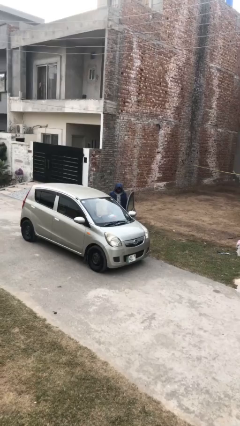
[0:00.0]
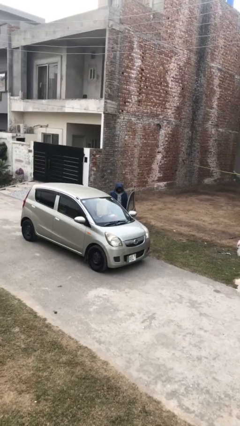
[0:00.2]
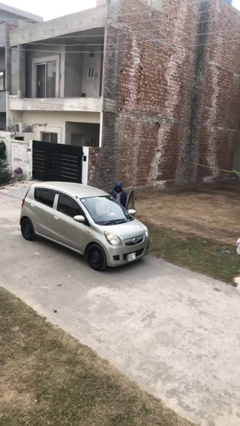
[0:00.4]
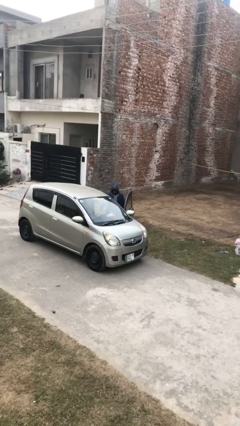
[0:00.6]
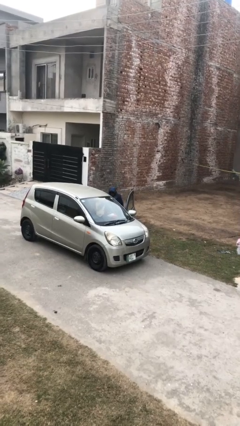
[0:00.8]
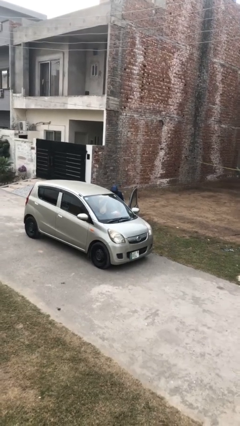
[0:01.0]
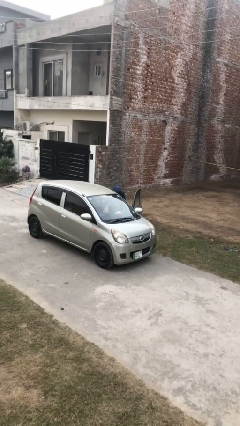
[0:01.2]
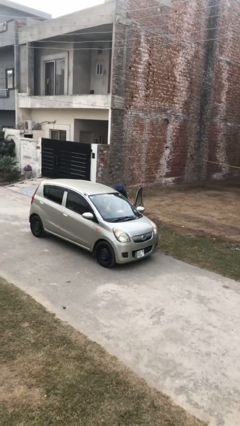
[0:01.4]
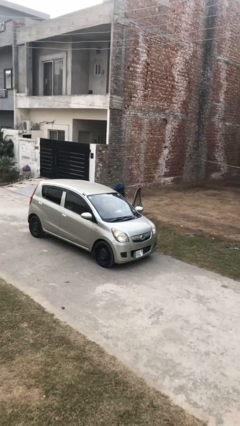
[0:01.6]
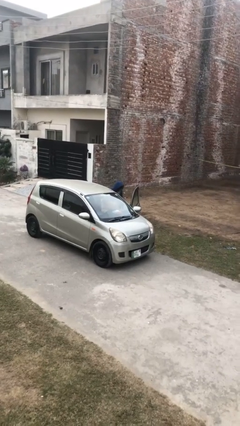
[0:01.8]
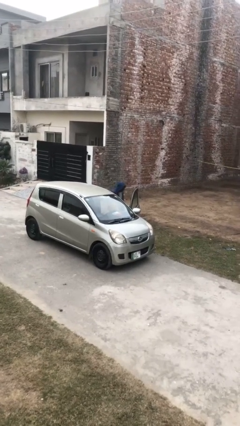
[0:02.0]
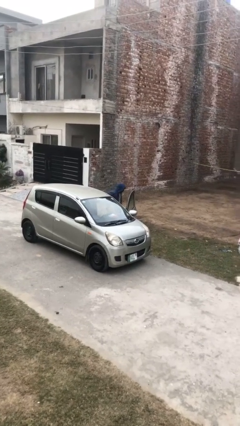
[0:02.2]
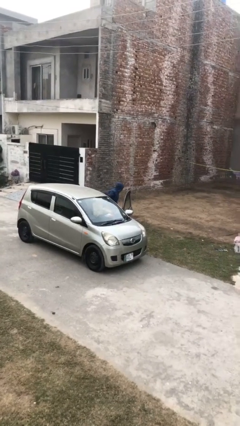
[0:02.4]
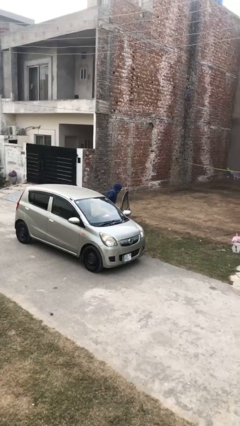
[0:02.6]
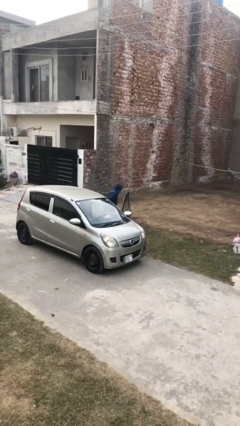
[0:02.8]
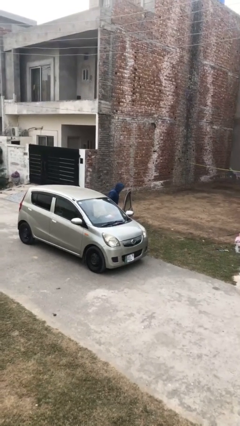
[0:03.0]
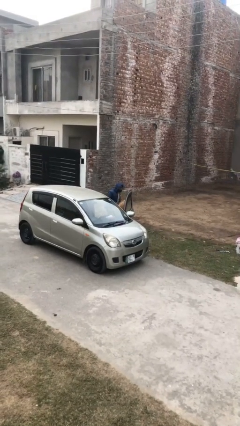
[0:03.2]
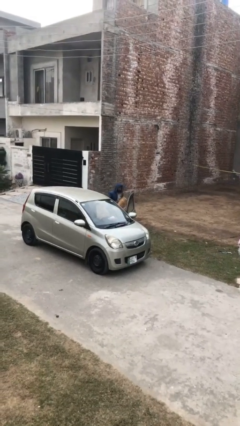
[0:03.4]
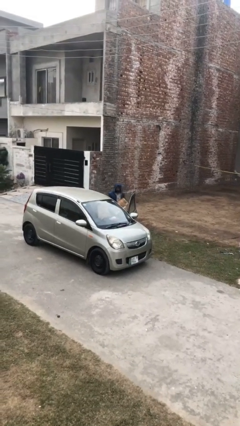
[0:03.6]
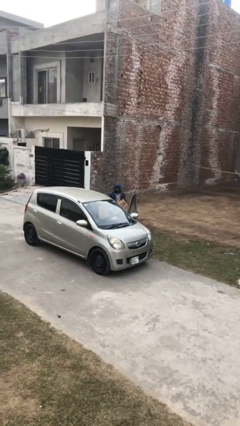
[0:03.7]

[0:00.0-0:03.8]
person unloads car

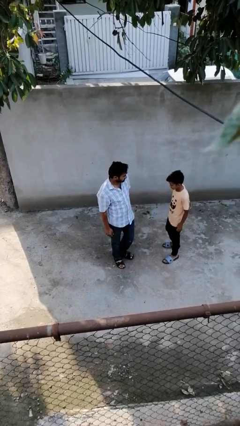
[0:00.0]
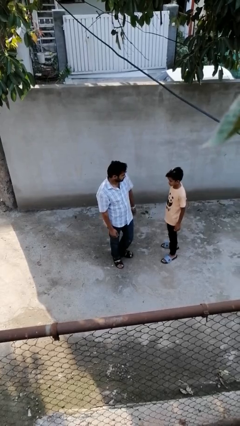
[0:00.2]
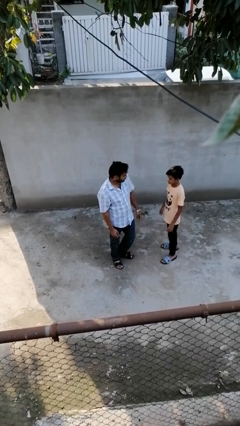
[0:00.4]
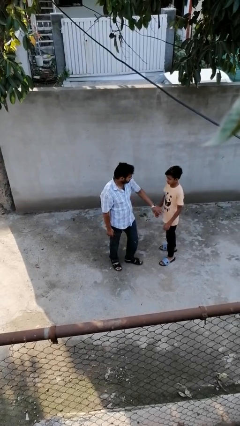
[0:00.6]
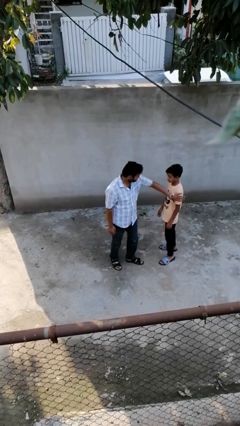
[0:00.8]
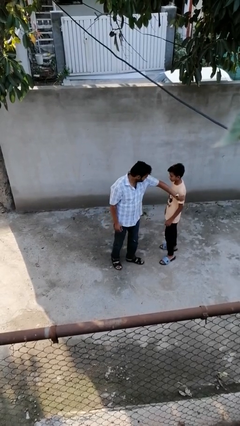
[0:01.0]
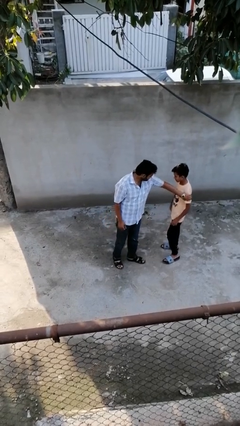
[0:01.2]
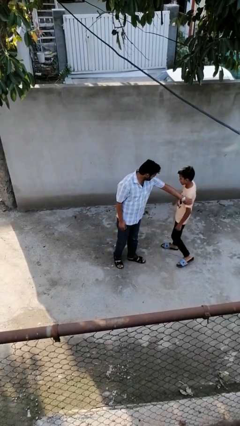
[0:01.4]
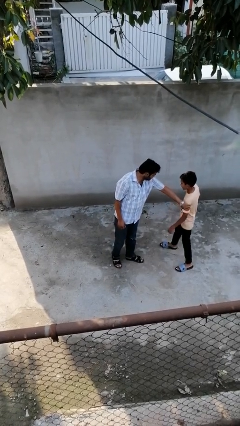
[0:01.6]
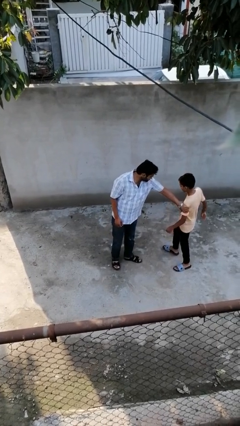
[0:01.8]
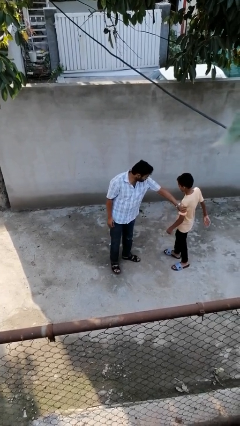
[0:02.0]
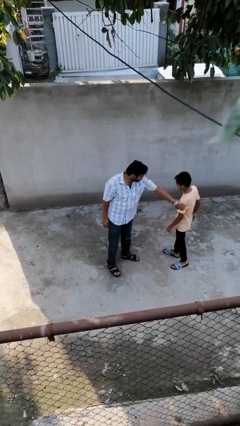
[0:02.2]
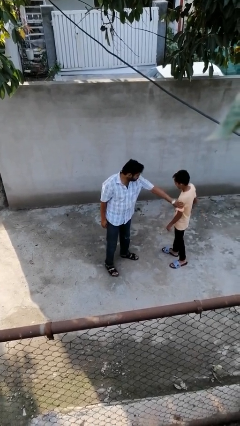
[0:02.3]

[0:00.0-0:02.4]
person grabs person by bicep

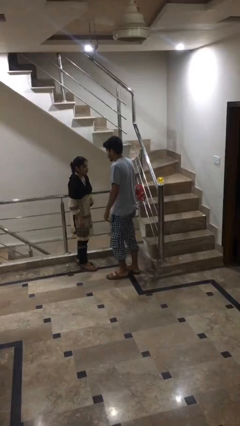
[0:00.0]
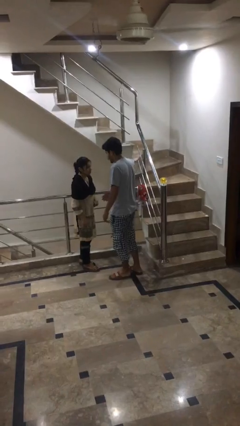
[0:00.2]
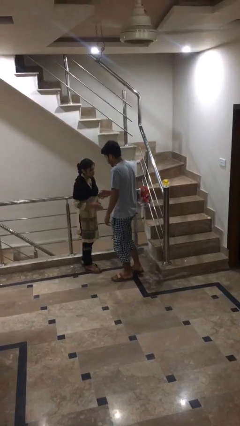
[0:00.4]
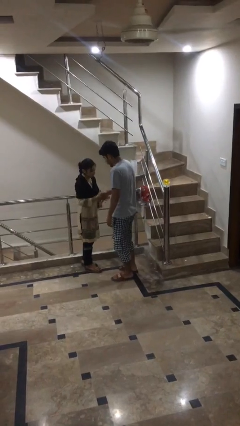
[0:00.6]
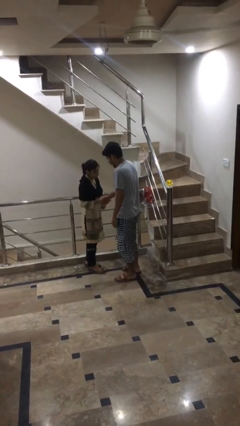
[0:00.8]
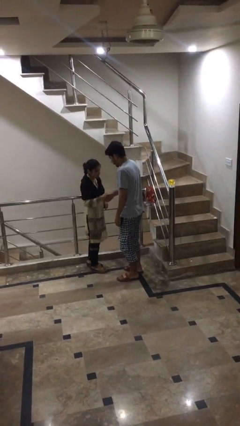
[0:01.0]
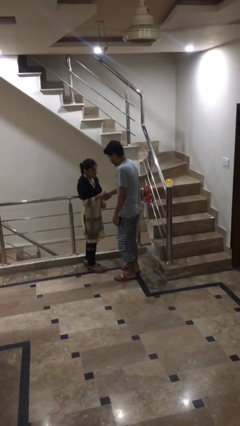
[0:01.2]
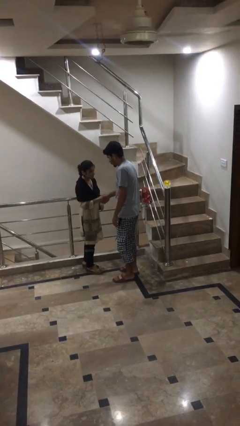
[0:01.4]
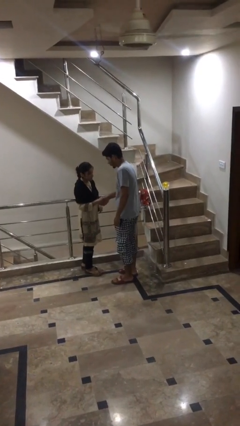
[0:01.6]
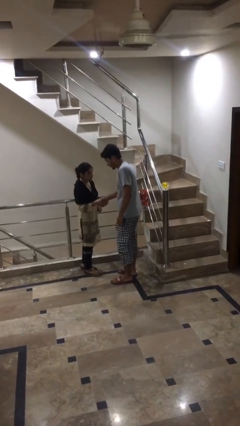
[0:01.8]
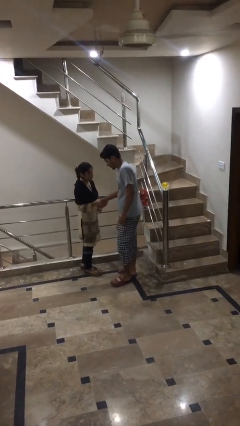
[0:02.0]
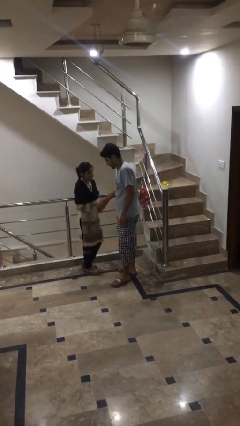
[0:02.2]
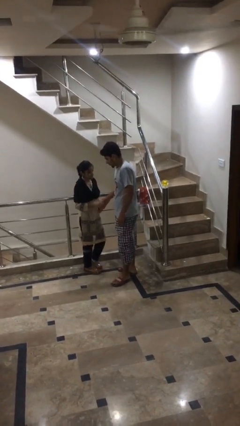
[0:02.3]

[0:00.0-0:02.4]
person shakes hand

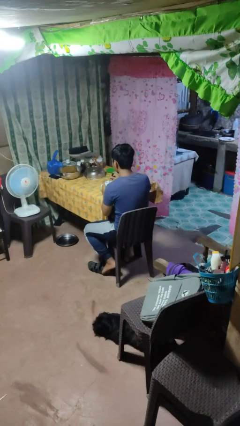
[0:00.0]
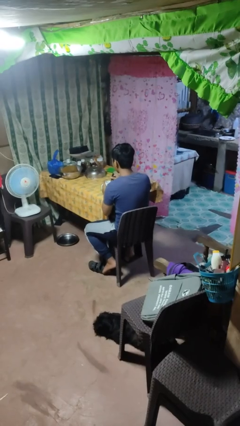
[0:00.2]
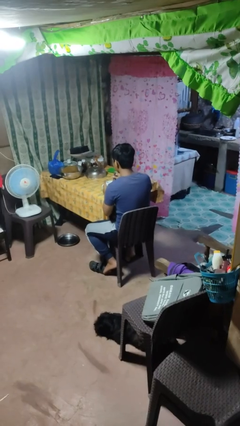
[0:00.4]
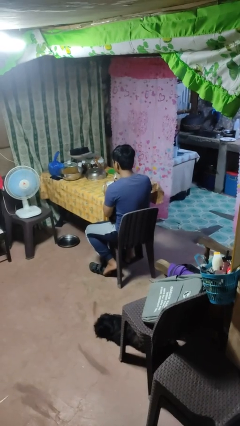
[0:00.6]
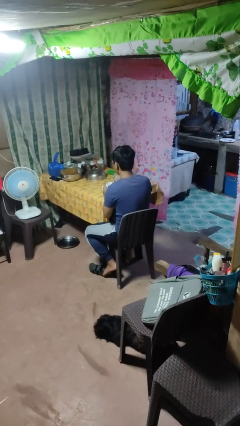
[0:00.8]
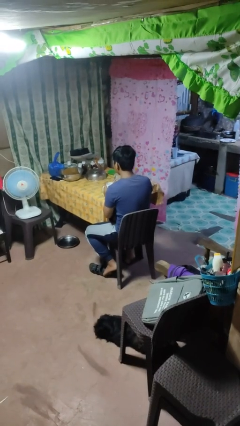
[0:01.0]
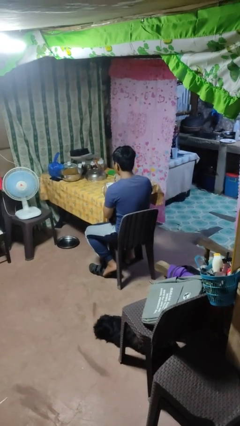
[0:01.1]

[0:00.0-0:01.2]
person stirs mug

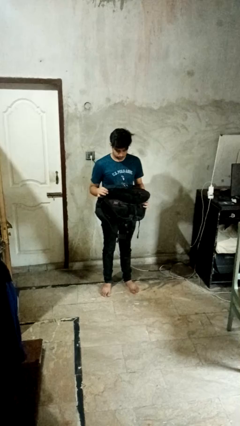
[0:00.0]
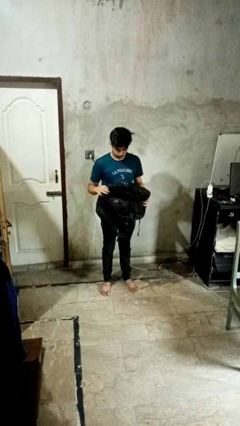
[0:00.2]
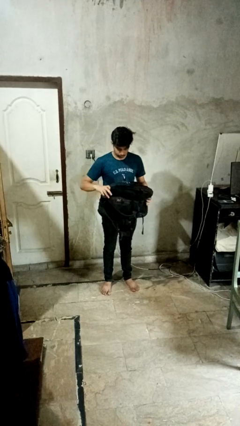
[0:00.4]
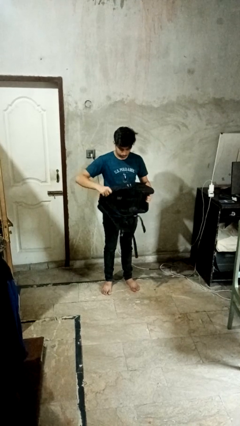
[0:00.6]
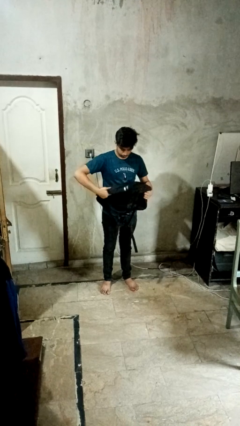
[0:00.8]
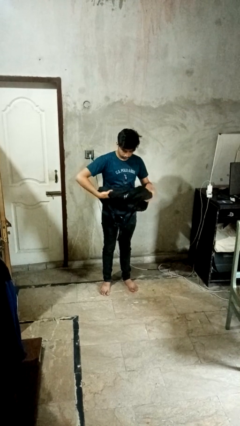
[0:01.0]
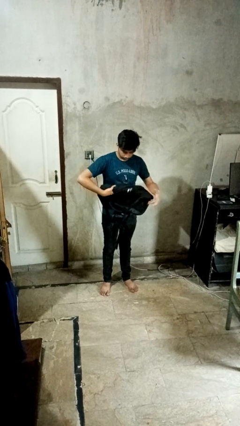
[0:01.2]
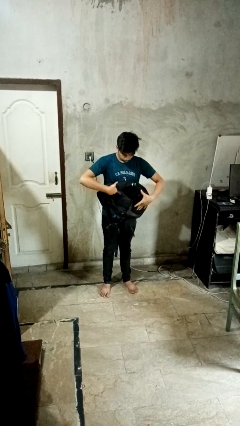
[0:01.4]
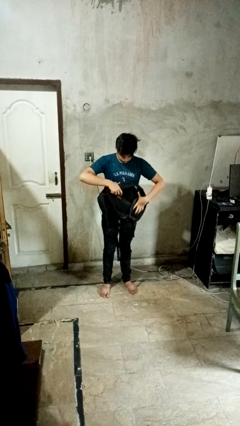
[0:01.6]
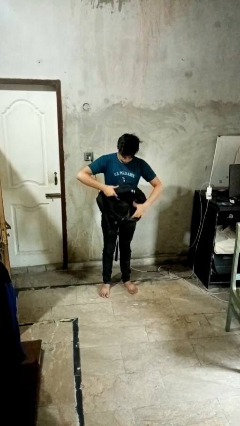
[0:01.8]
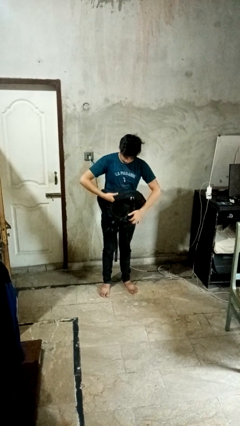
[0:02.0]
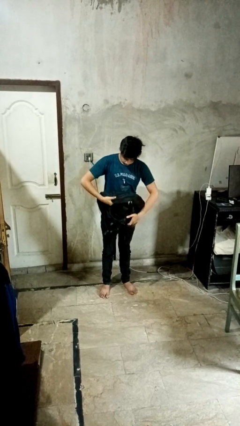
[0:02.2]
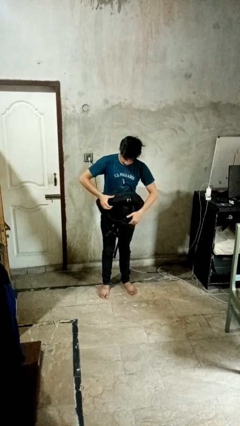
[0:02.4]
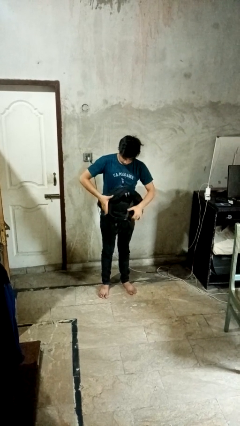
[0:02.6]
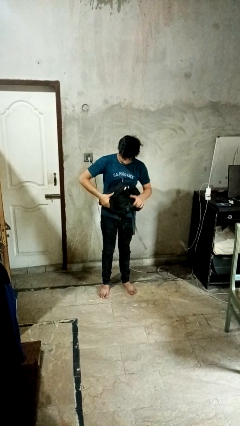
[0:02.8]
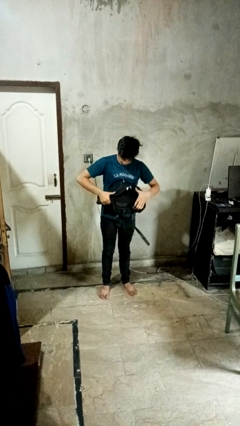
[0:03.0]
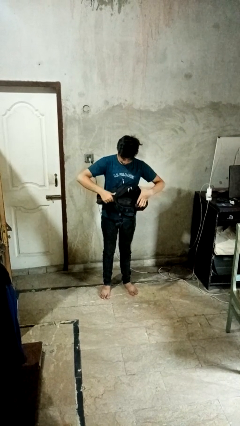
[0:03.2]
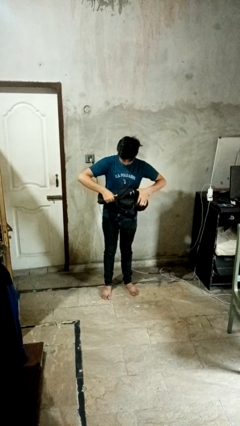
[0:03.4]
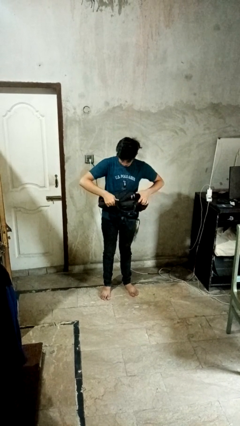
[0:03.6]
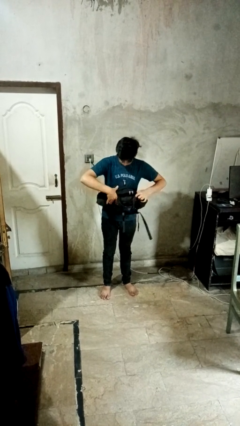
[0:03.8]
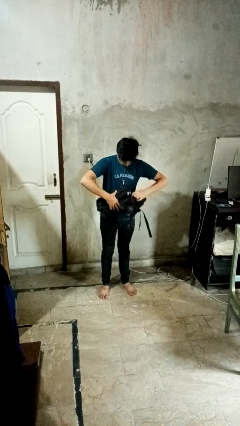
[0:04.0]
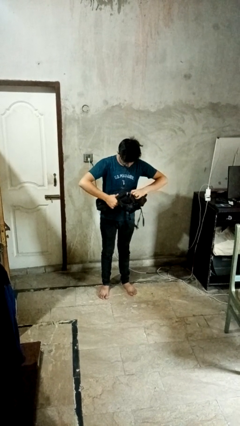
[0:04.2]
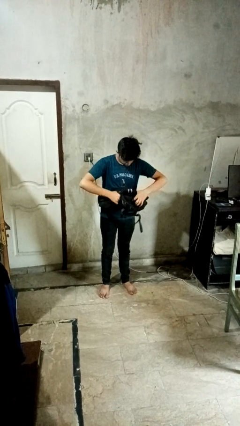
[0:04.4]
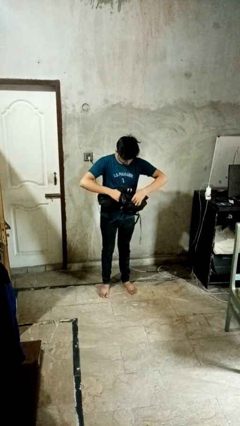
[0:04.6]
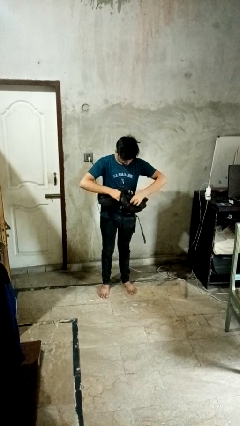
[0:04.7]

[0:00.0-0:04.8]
person squeezes object

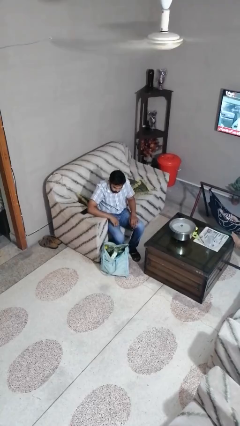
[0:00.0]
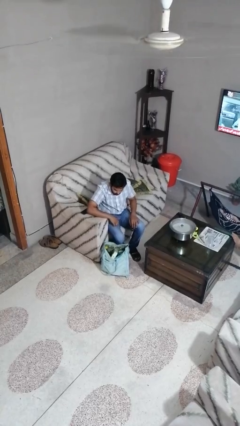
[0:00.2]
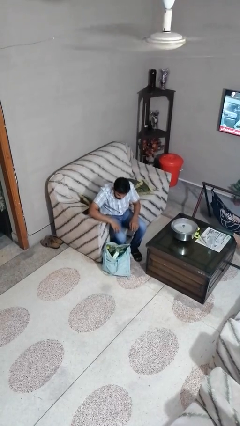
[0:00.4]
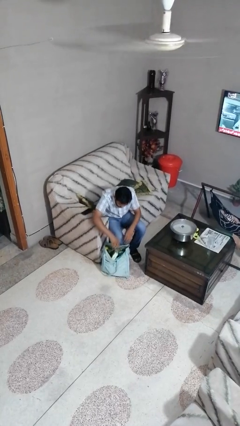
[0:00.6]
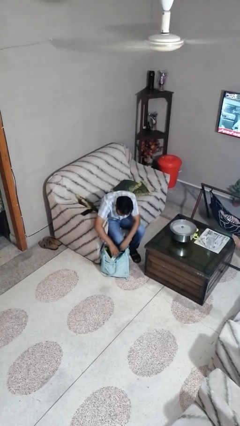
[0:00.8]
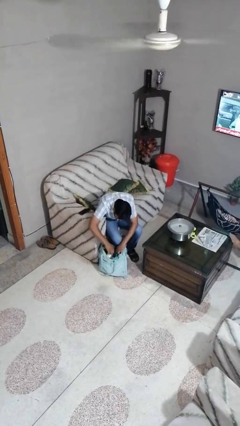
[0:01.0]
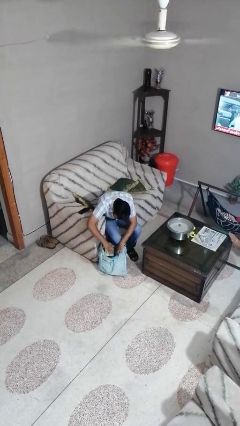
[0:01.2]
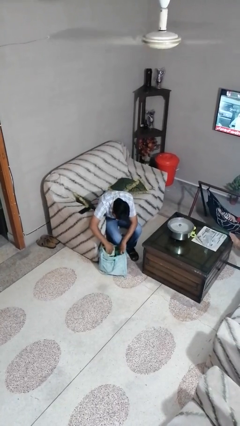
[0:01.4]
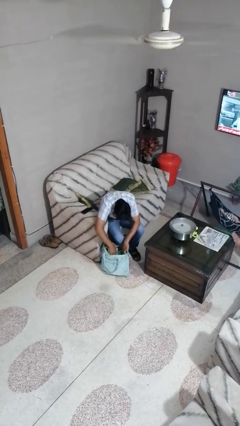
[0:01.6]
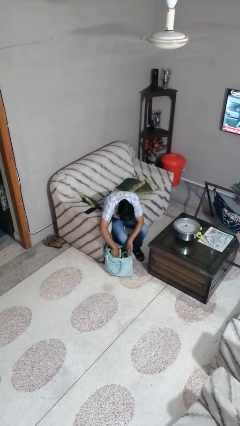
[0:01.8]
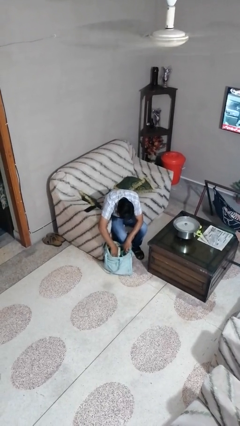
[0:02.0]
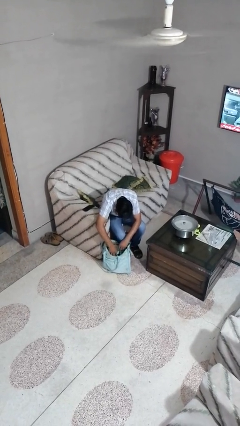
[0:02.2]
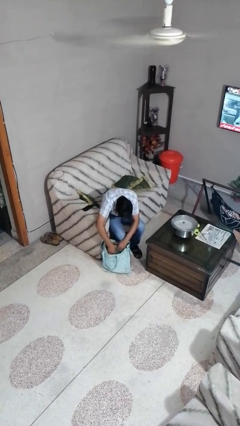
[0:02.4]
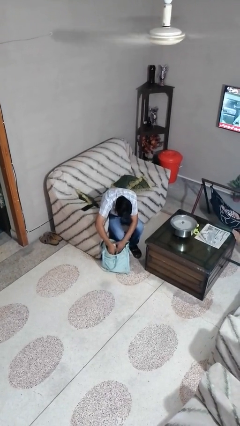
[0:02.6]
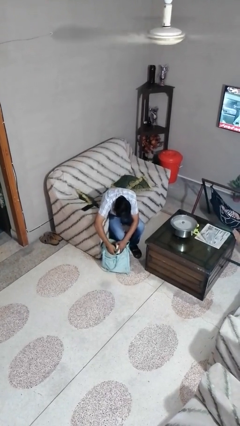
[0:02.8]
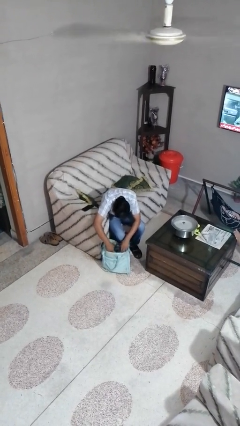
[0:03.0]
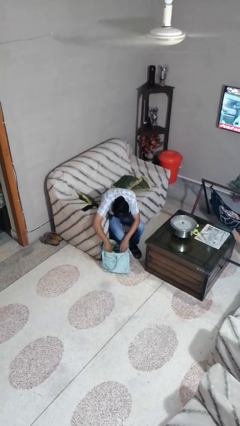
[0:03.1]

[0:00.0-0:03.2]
person searches in bag
